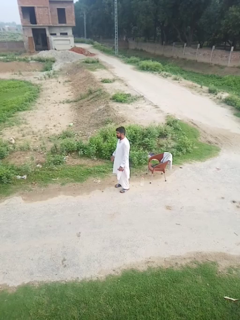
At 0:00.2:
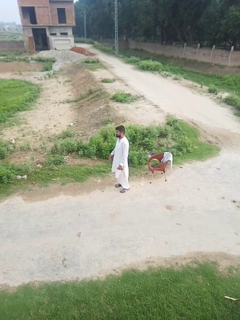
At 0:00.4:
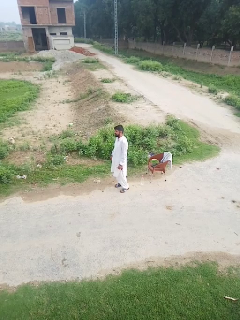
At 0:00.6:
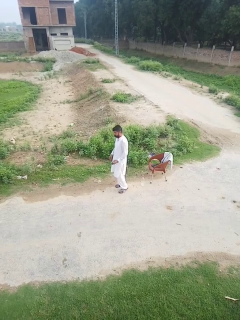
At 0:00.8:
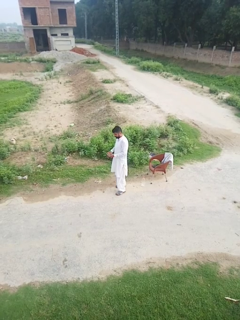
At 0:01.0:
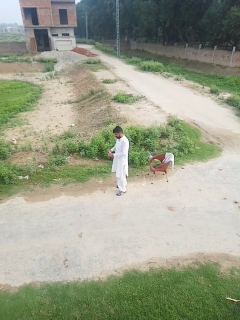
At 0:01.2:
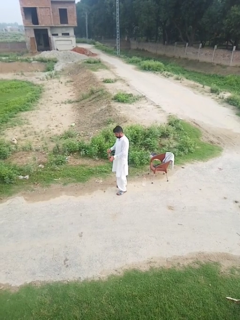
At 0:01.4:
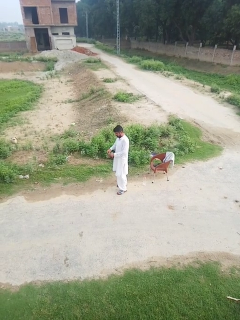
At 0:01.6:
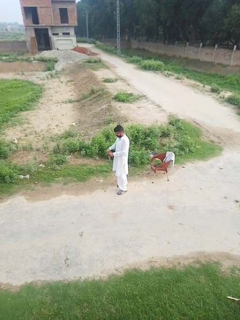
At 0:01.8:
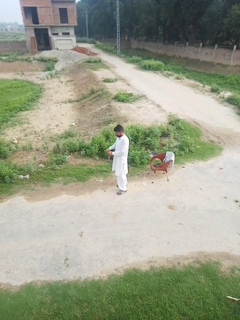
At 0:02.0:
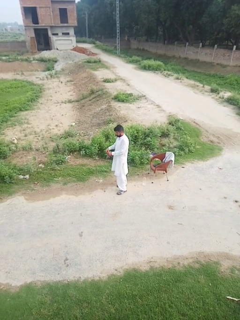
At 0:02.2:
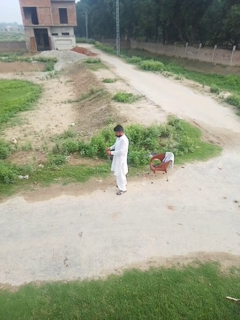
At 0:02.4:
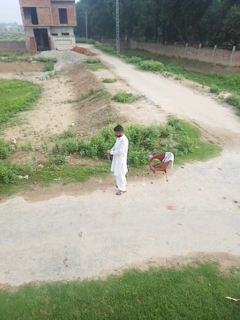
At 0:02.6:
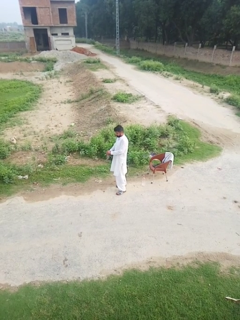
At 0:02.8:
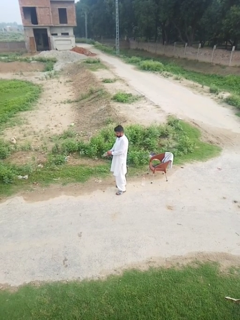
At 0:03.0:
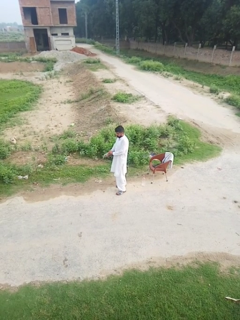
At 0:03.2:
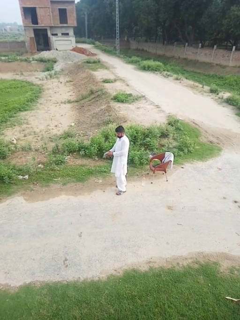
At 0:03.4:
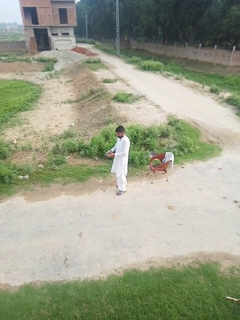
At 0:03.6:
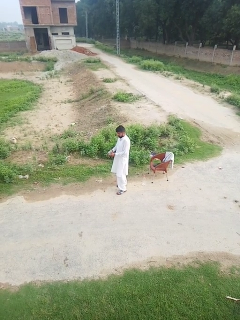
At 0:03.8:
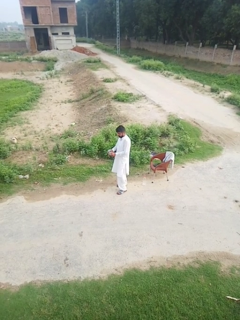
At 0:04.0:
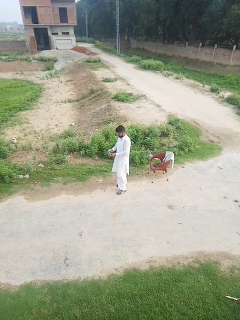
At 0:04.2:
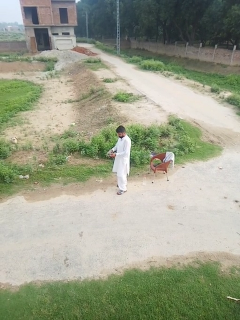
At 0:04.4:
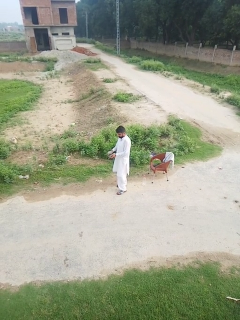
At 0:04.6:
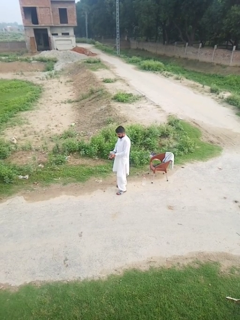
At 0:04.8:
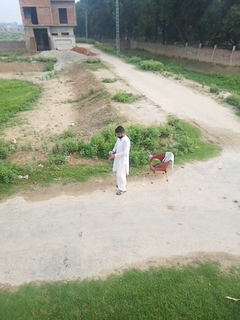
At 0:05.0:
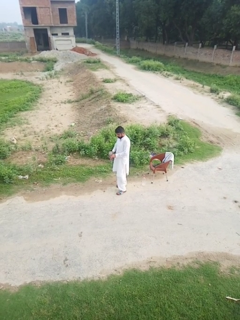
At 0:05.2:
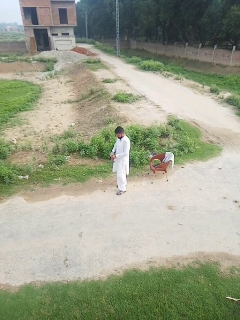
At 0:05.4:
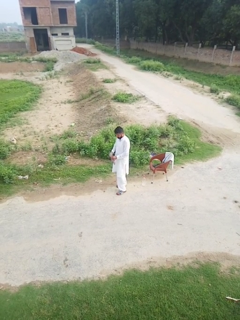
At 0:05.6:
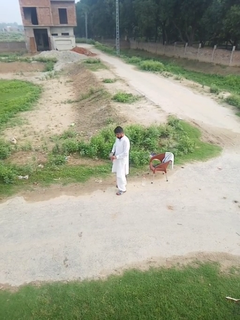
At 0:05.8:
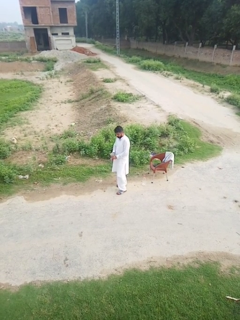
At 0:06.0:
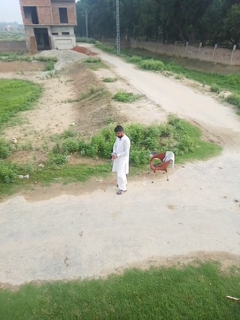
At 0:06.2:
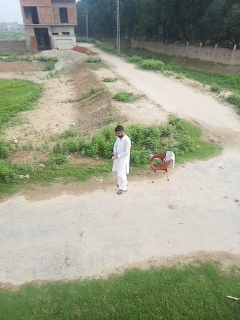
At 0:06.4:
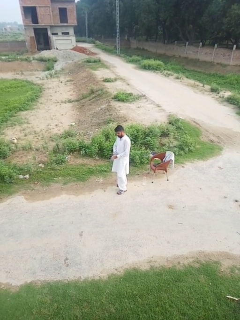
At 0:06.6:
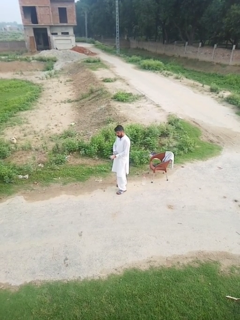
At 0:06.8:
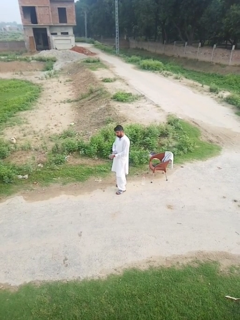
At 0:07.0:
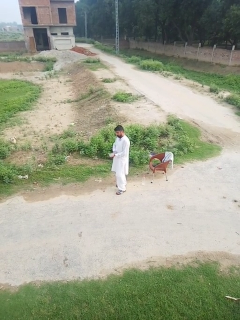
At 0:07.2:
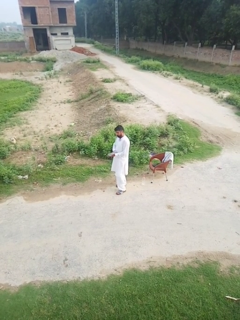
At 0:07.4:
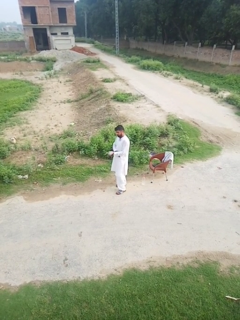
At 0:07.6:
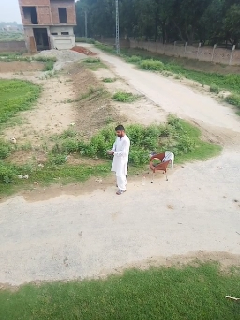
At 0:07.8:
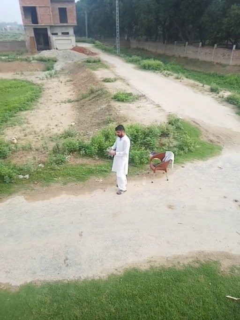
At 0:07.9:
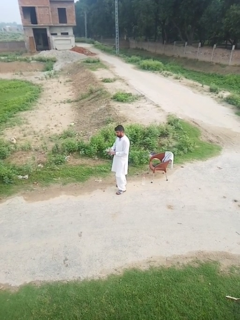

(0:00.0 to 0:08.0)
person puts on gloves

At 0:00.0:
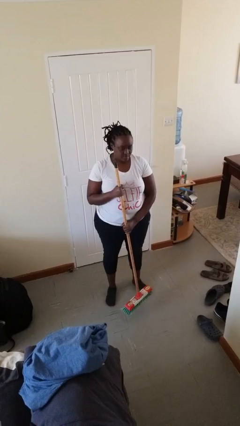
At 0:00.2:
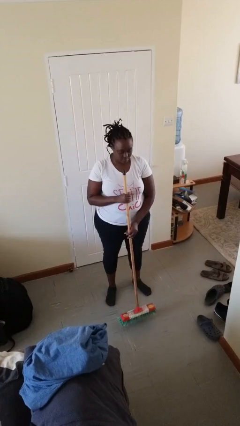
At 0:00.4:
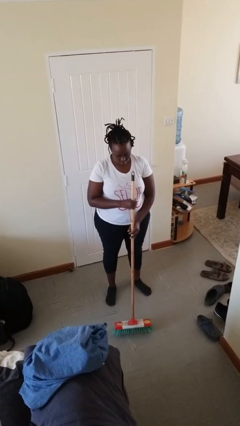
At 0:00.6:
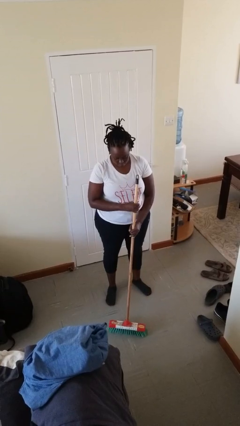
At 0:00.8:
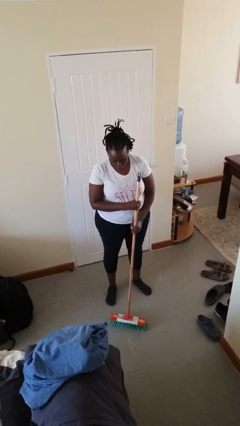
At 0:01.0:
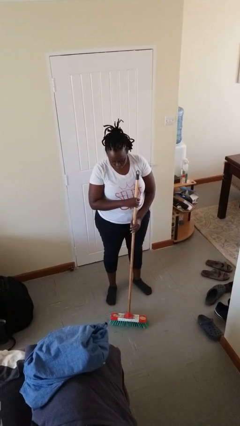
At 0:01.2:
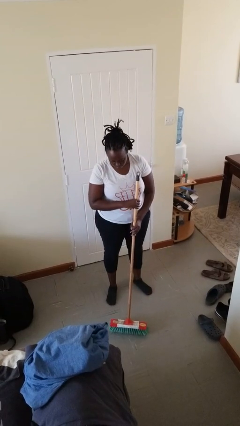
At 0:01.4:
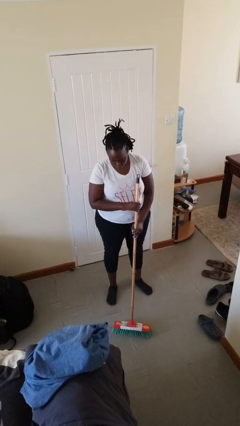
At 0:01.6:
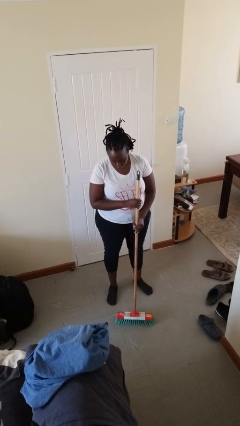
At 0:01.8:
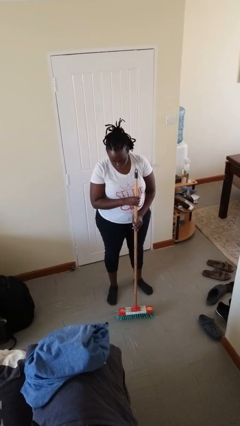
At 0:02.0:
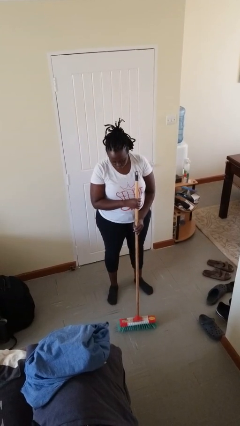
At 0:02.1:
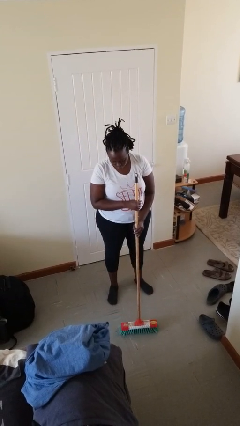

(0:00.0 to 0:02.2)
person sweeps floor

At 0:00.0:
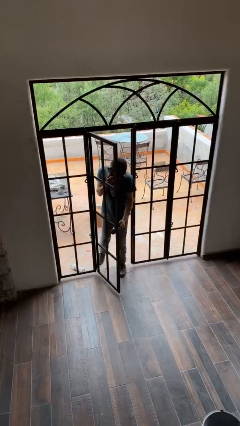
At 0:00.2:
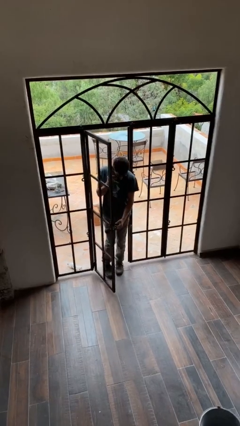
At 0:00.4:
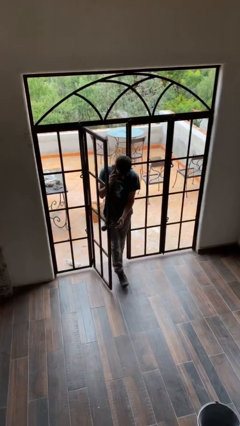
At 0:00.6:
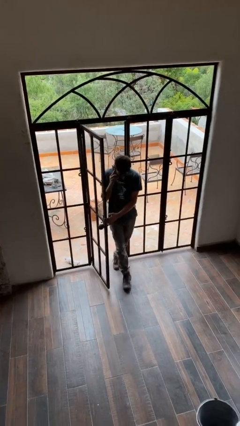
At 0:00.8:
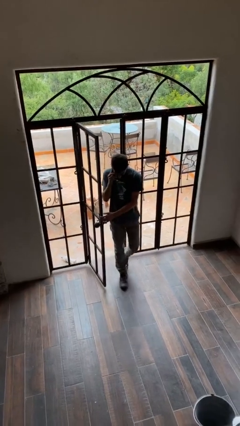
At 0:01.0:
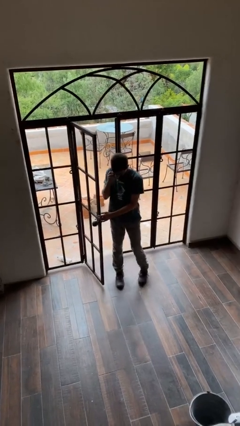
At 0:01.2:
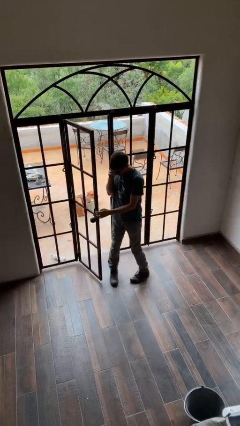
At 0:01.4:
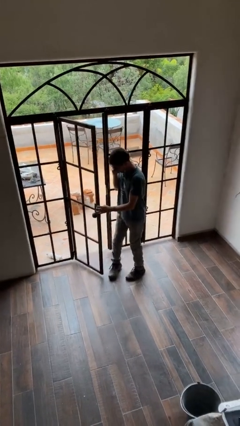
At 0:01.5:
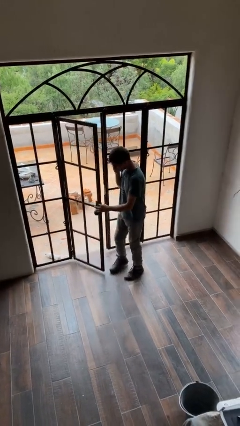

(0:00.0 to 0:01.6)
person enters scene through structure

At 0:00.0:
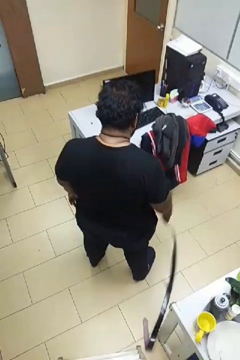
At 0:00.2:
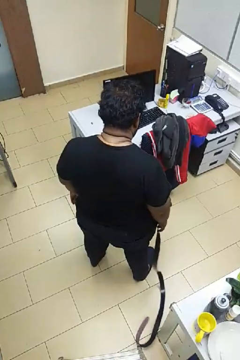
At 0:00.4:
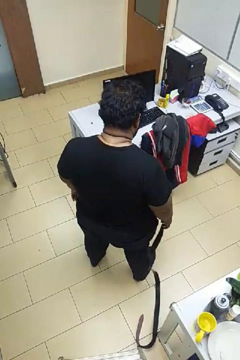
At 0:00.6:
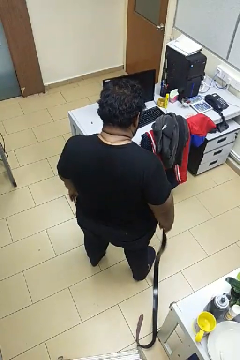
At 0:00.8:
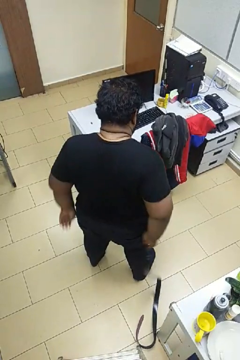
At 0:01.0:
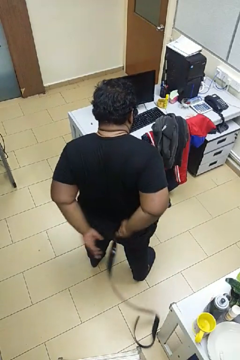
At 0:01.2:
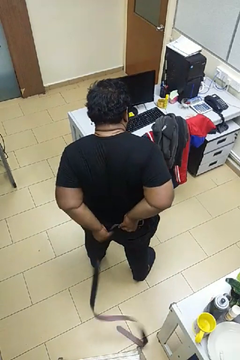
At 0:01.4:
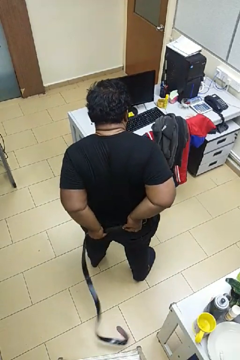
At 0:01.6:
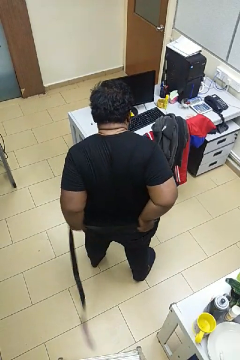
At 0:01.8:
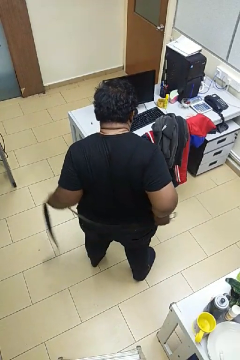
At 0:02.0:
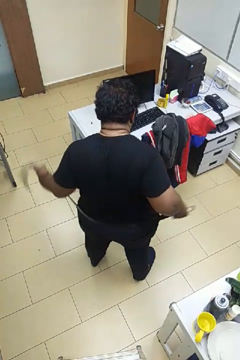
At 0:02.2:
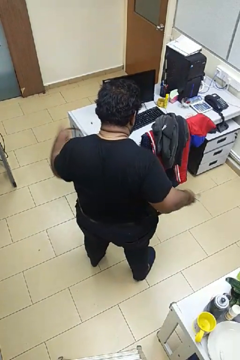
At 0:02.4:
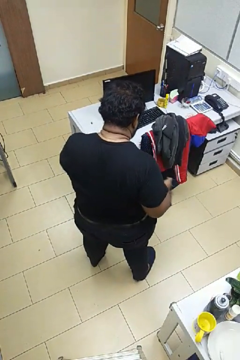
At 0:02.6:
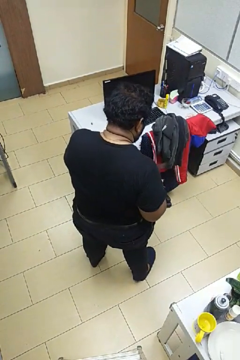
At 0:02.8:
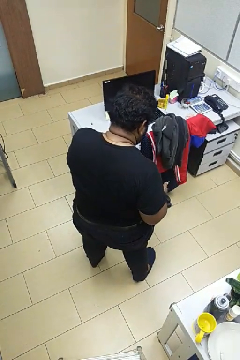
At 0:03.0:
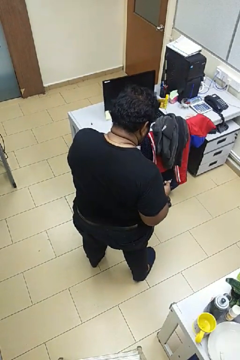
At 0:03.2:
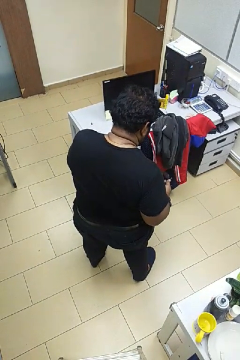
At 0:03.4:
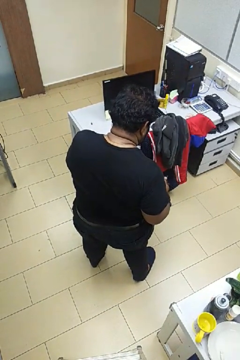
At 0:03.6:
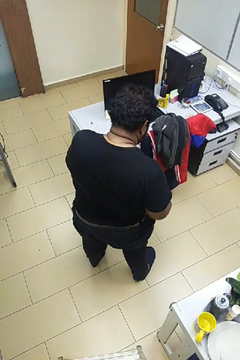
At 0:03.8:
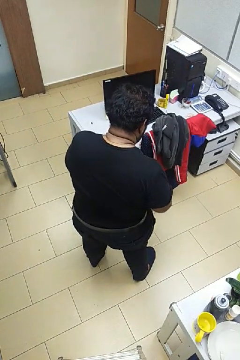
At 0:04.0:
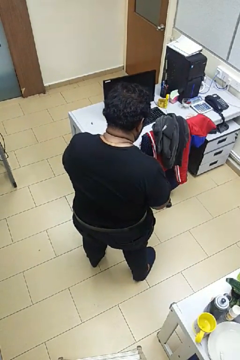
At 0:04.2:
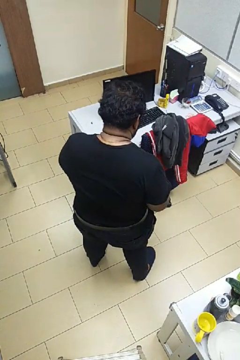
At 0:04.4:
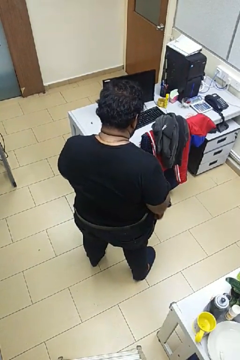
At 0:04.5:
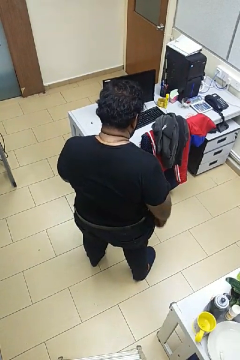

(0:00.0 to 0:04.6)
person puts on belt

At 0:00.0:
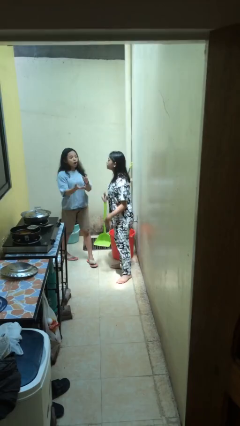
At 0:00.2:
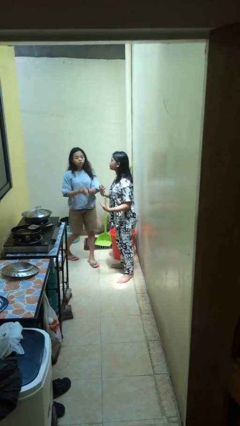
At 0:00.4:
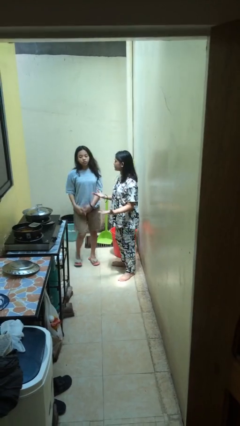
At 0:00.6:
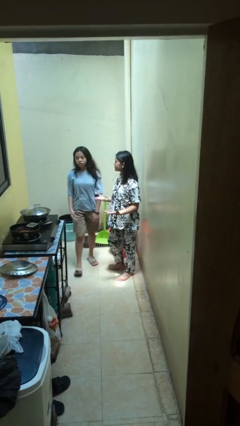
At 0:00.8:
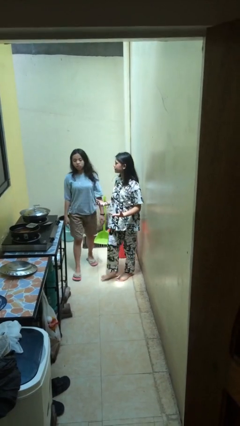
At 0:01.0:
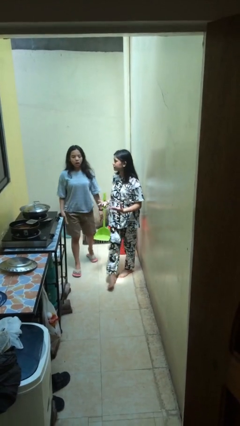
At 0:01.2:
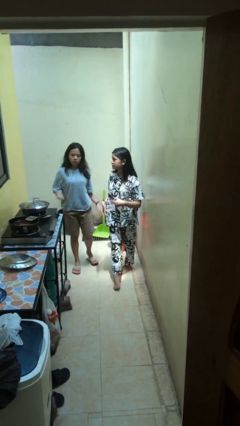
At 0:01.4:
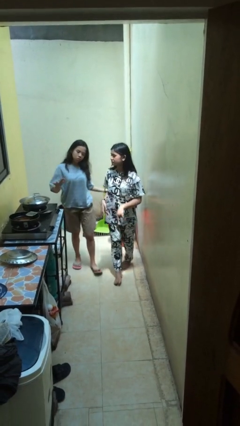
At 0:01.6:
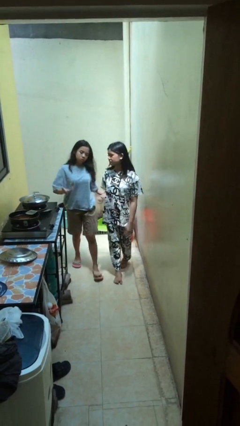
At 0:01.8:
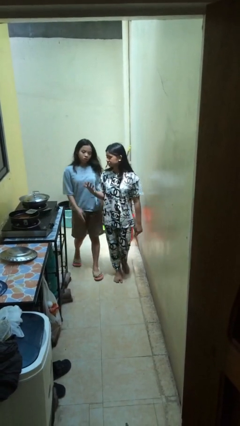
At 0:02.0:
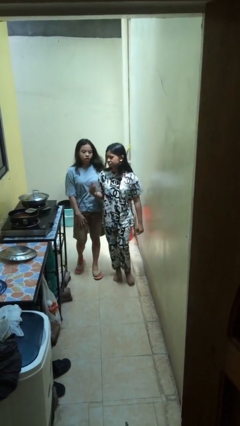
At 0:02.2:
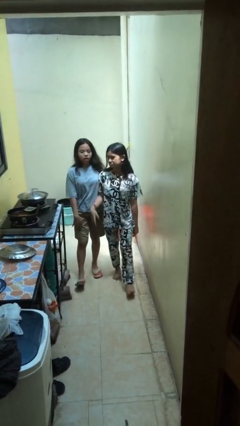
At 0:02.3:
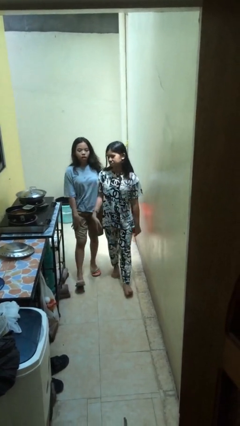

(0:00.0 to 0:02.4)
person talks to person

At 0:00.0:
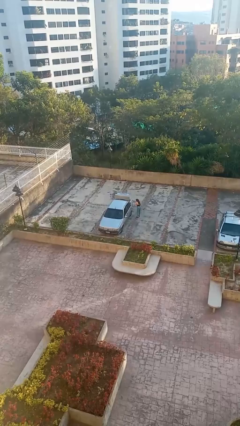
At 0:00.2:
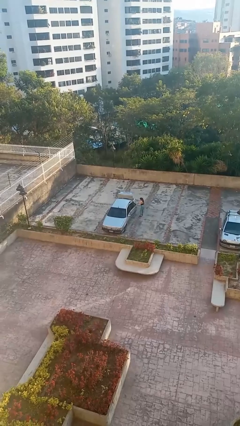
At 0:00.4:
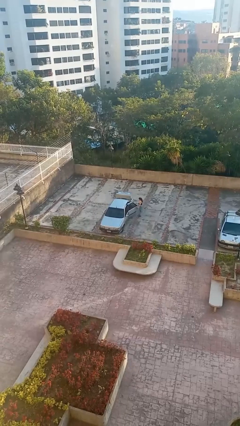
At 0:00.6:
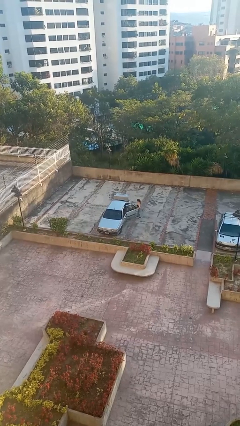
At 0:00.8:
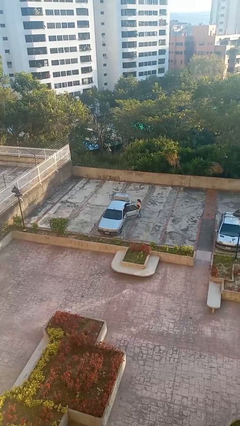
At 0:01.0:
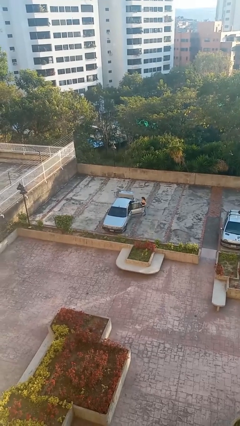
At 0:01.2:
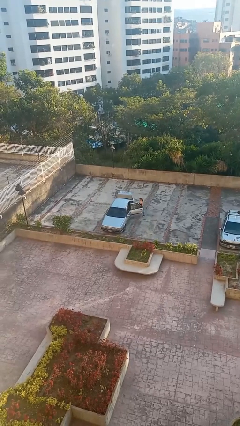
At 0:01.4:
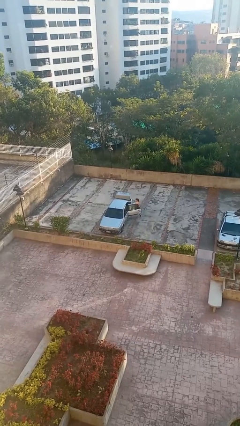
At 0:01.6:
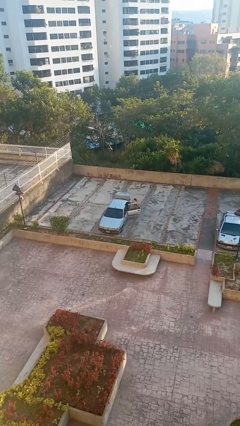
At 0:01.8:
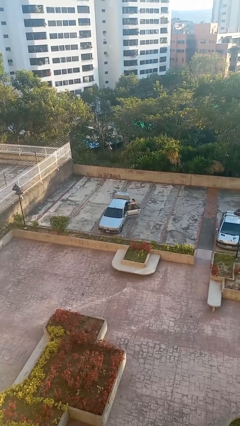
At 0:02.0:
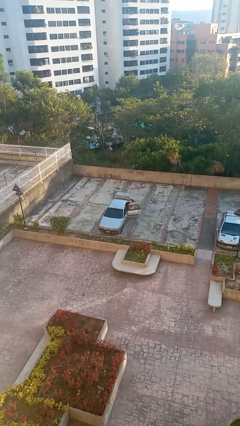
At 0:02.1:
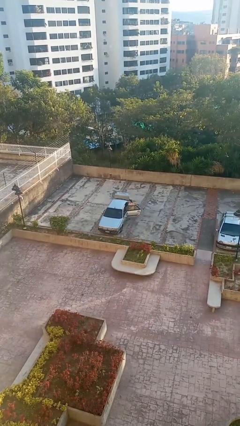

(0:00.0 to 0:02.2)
car picks up person
